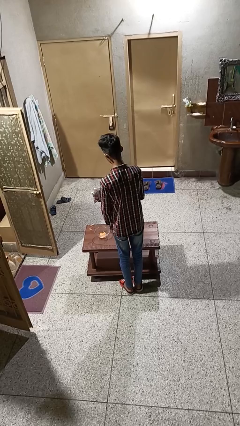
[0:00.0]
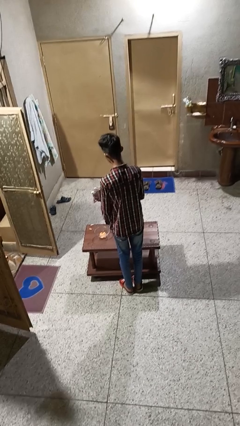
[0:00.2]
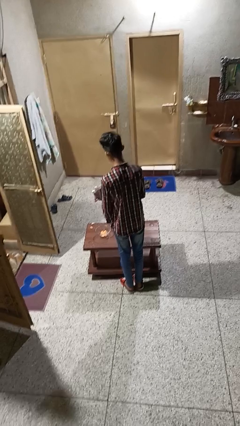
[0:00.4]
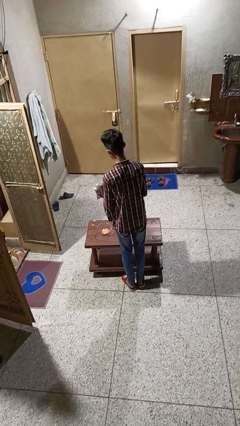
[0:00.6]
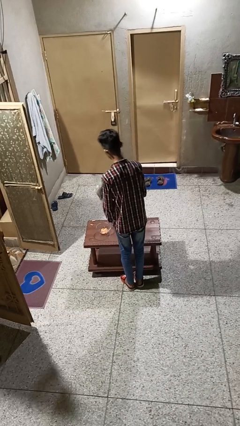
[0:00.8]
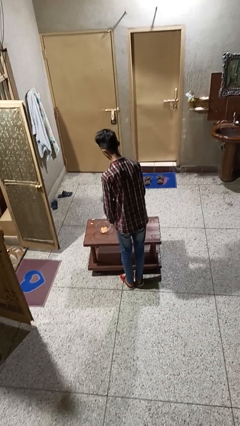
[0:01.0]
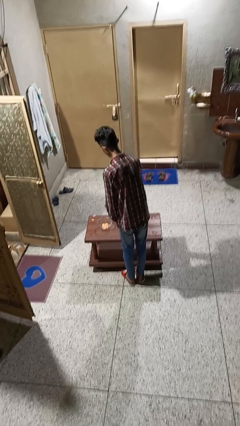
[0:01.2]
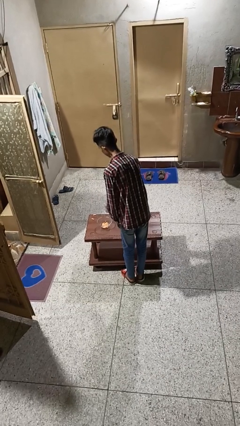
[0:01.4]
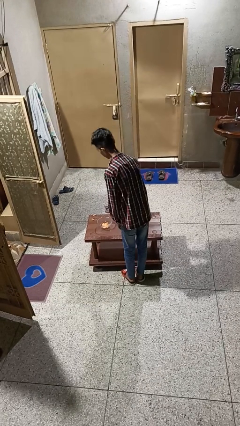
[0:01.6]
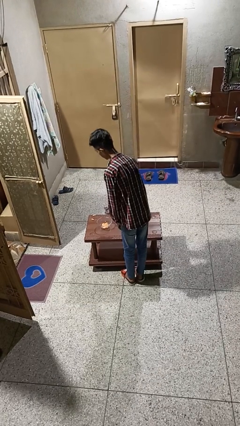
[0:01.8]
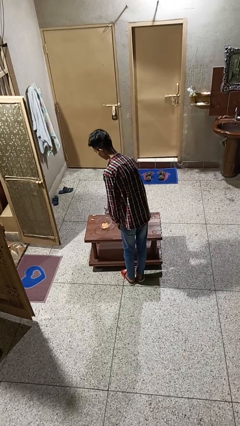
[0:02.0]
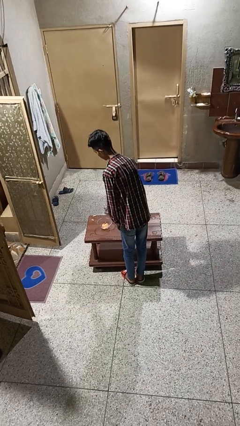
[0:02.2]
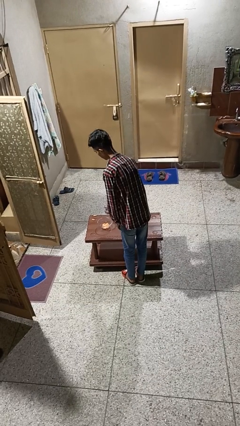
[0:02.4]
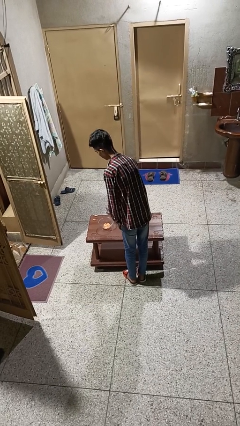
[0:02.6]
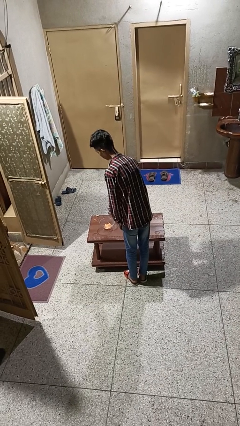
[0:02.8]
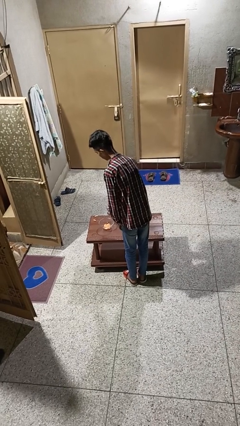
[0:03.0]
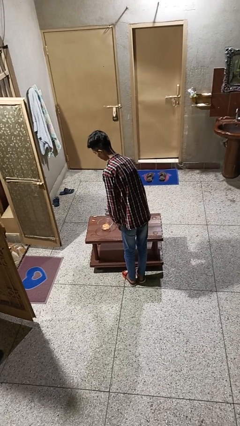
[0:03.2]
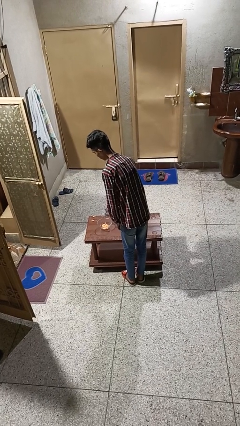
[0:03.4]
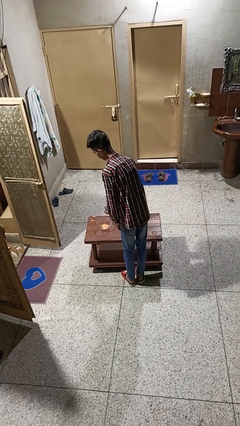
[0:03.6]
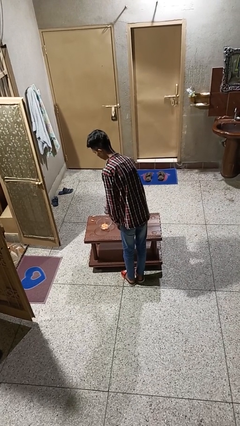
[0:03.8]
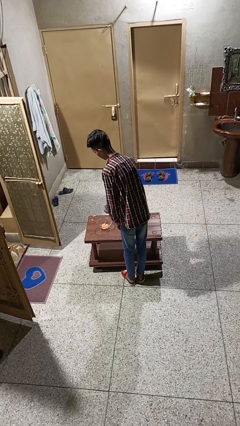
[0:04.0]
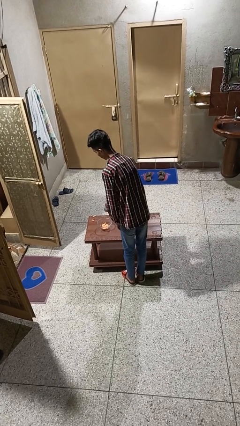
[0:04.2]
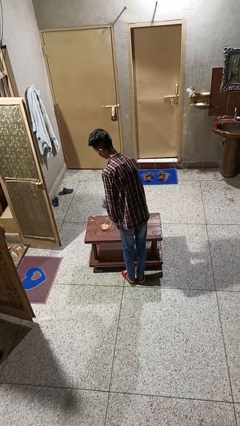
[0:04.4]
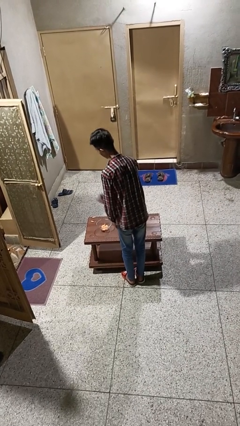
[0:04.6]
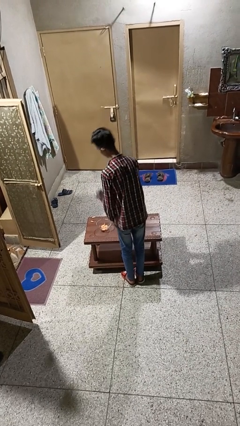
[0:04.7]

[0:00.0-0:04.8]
person pours into bowl

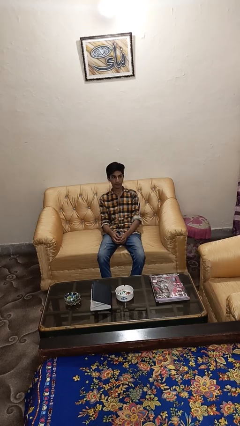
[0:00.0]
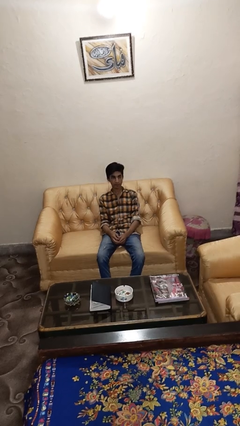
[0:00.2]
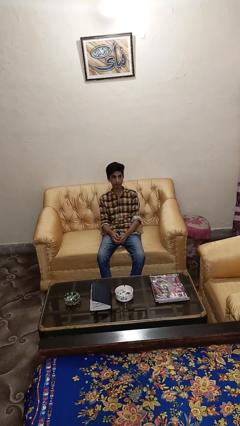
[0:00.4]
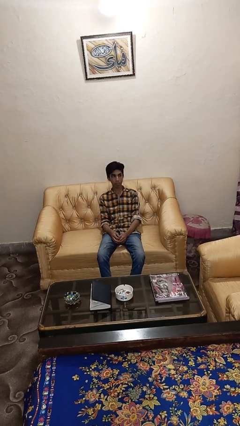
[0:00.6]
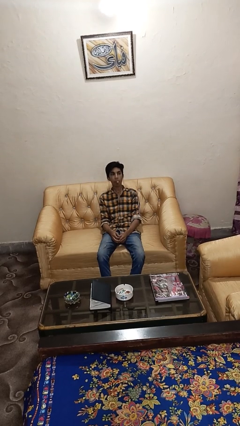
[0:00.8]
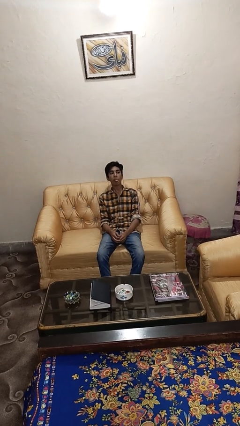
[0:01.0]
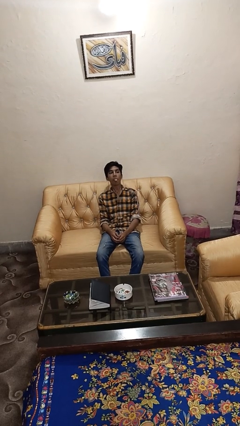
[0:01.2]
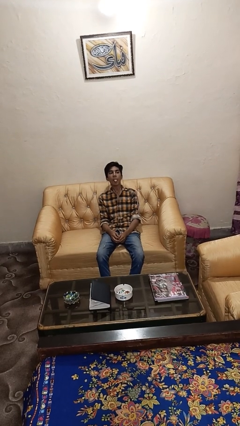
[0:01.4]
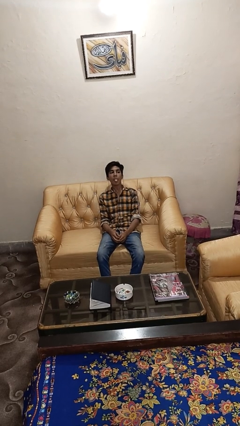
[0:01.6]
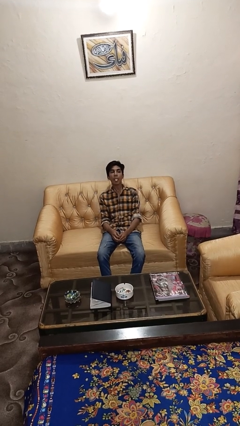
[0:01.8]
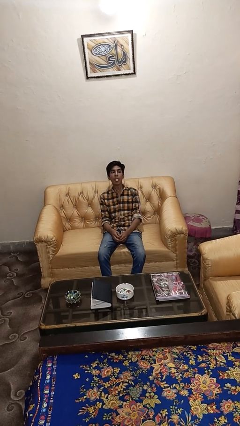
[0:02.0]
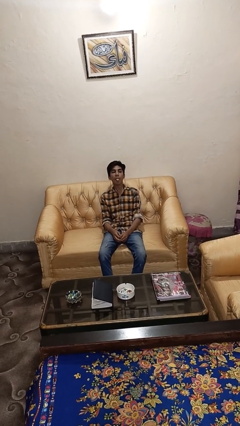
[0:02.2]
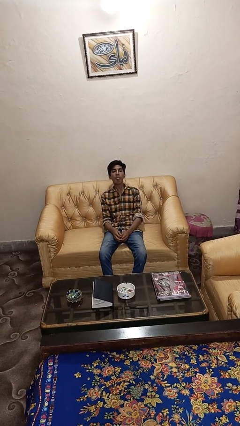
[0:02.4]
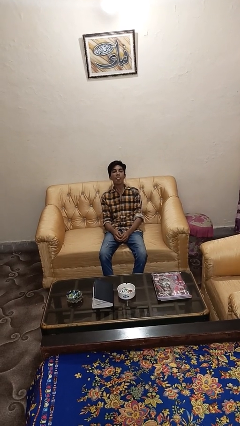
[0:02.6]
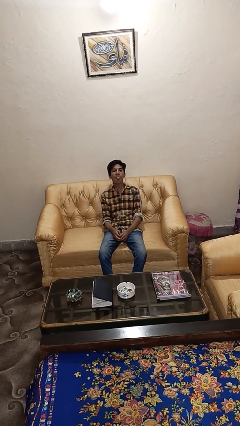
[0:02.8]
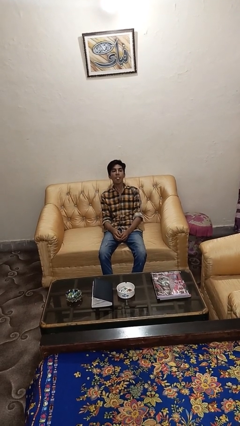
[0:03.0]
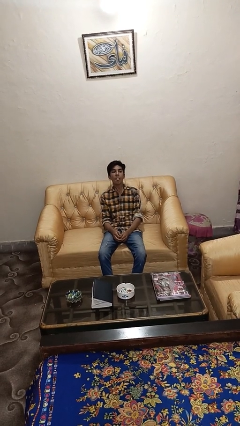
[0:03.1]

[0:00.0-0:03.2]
person sticks out tongue

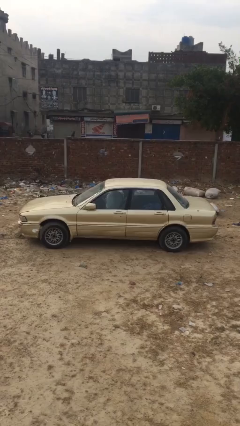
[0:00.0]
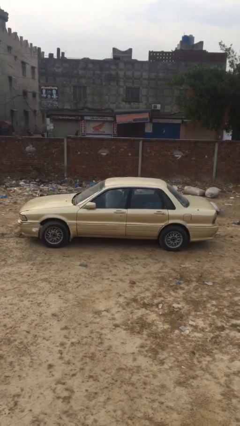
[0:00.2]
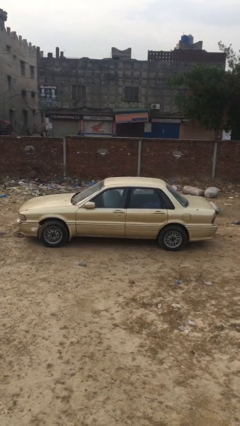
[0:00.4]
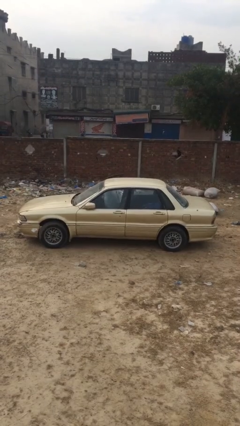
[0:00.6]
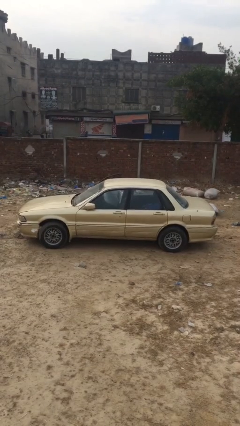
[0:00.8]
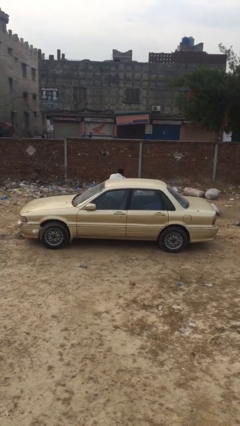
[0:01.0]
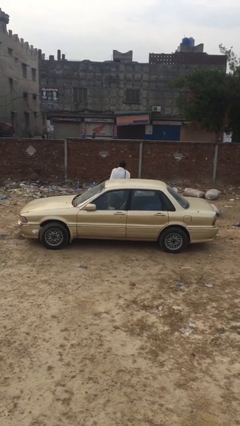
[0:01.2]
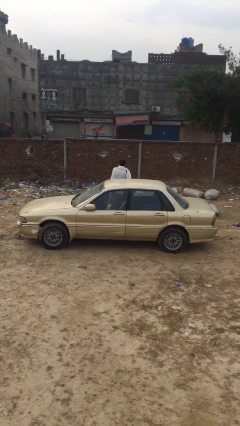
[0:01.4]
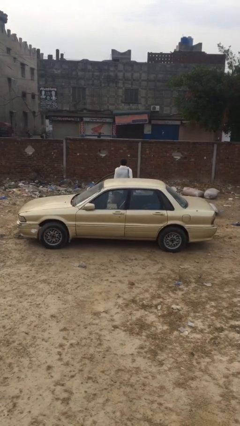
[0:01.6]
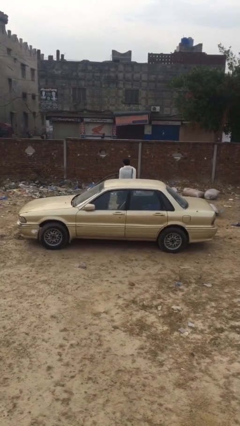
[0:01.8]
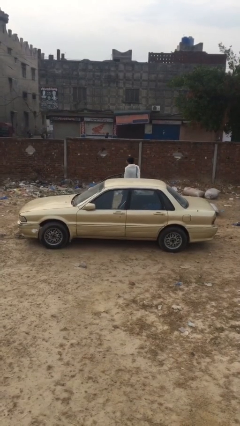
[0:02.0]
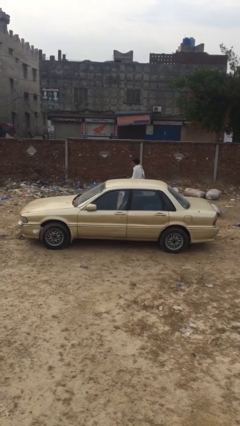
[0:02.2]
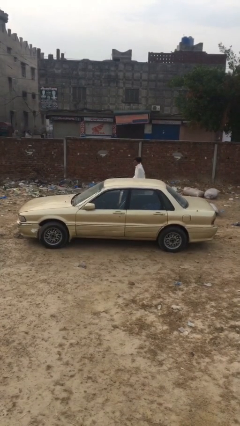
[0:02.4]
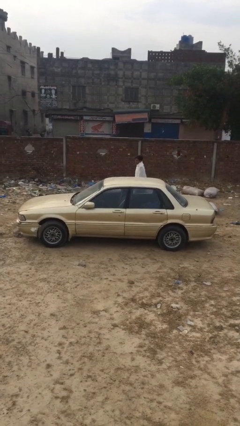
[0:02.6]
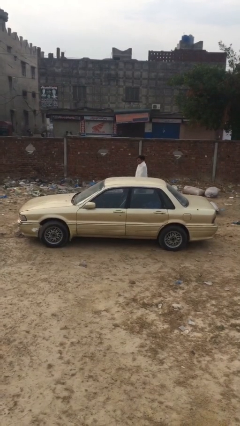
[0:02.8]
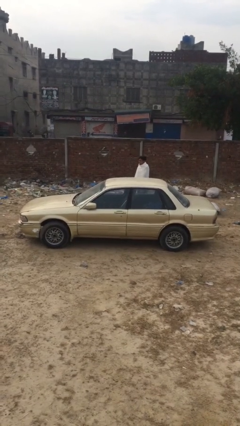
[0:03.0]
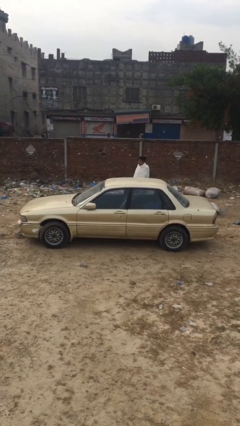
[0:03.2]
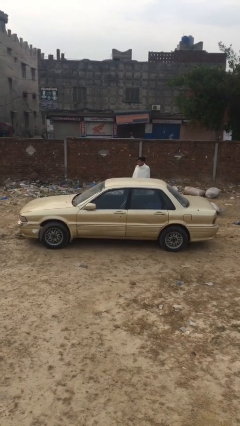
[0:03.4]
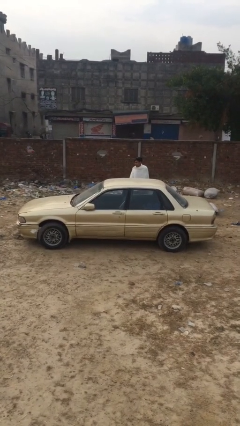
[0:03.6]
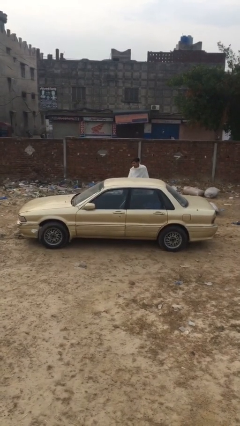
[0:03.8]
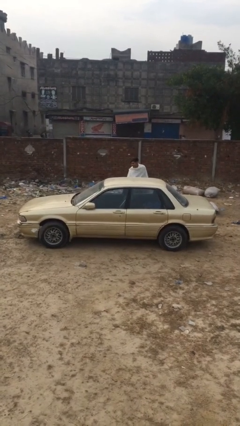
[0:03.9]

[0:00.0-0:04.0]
car drops off person

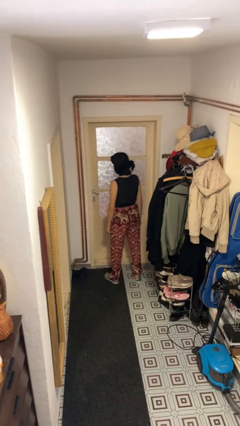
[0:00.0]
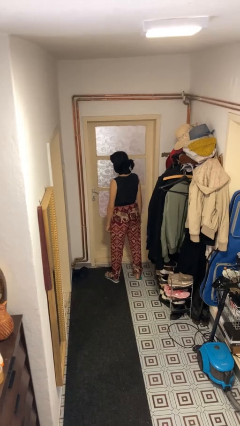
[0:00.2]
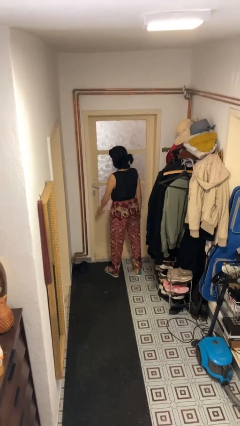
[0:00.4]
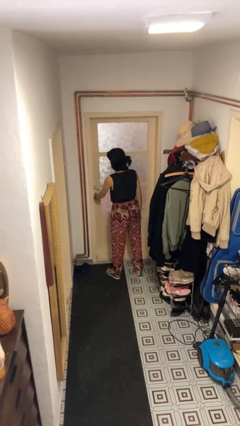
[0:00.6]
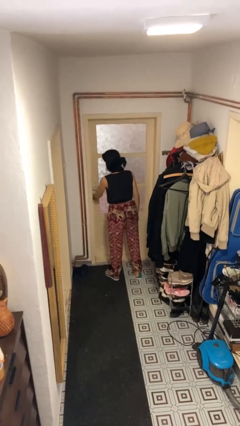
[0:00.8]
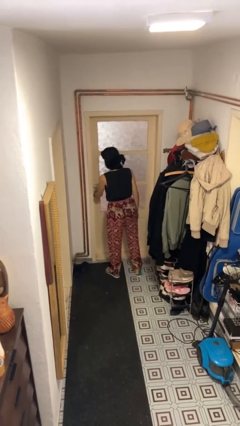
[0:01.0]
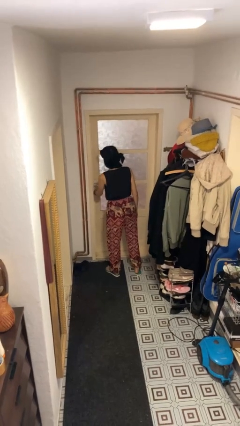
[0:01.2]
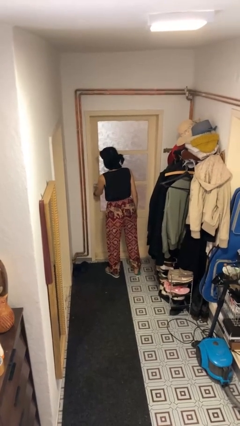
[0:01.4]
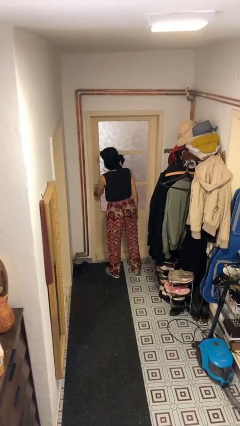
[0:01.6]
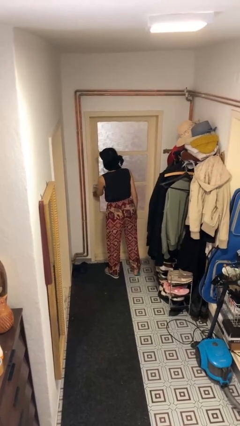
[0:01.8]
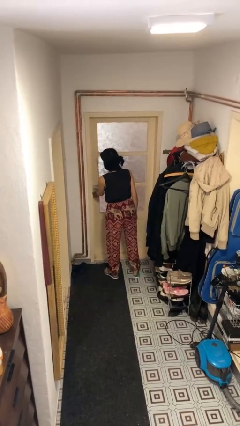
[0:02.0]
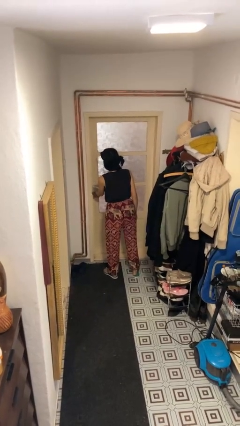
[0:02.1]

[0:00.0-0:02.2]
person unlocks door with keys

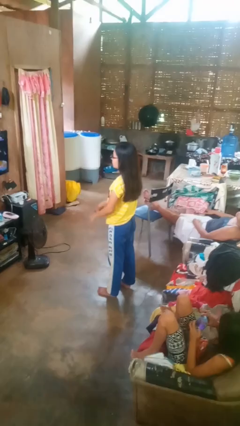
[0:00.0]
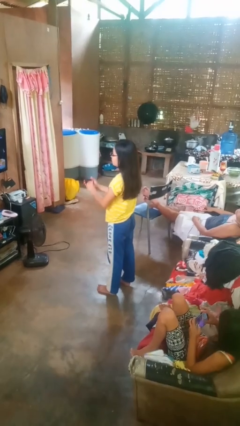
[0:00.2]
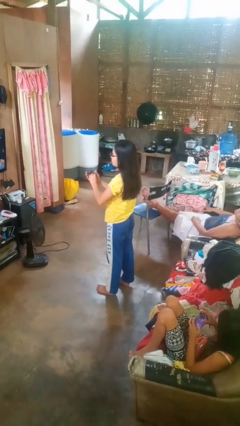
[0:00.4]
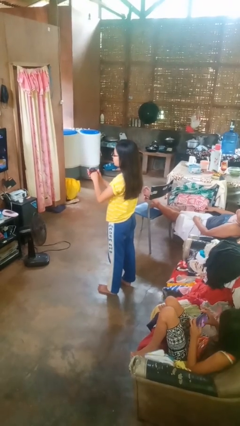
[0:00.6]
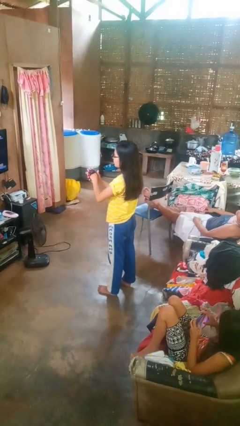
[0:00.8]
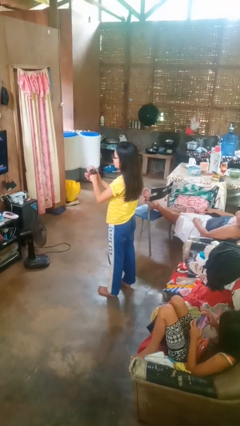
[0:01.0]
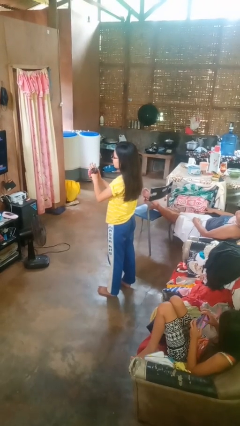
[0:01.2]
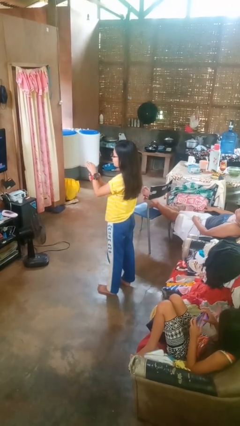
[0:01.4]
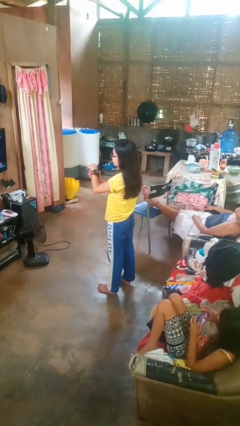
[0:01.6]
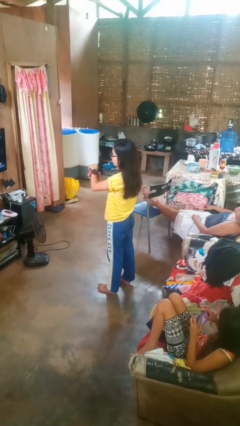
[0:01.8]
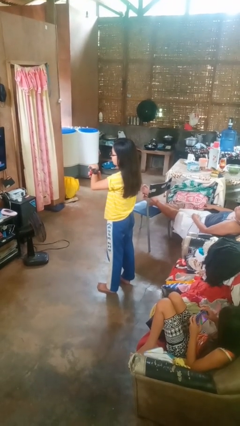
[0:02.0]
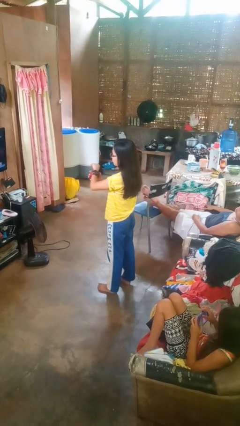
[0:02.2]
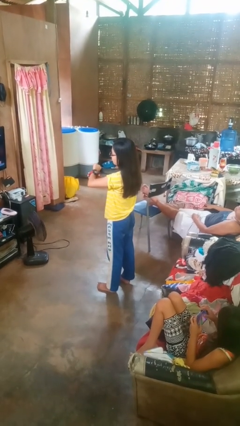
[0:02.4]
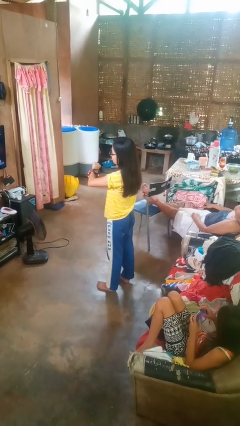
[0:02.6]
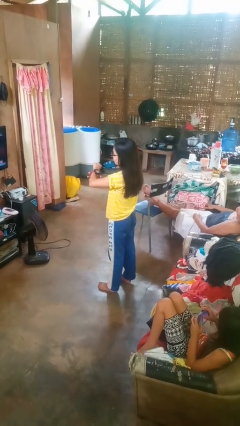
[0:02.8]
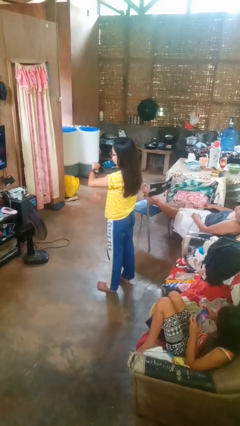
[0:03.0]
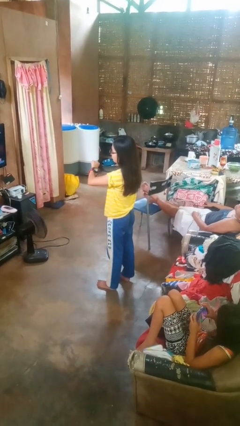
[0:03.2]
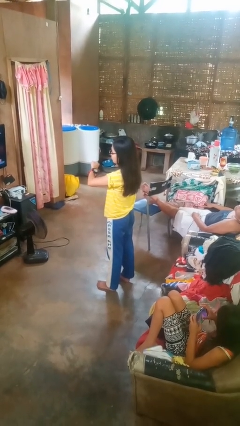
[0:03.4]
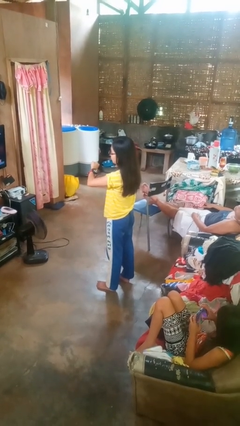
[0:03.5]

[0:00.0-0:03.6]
person puts on wristwatch
